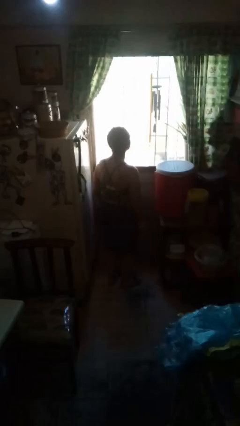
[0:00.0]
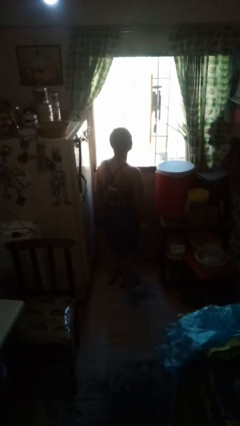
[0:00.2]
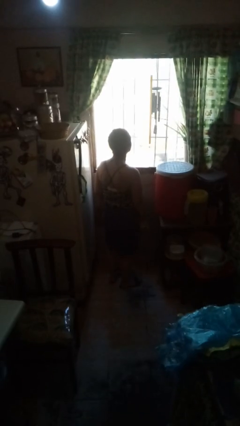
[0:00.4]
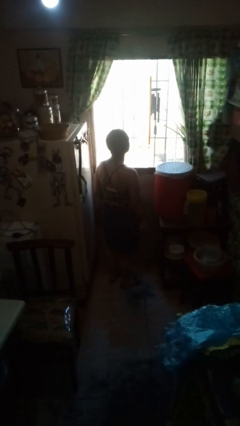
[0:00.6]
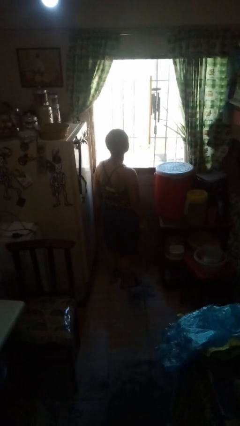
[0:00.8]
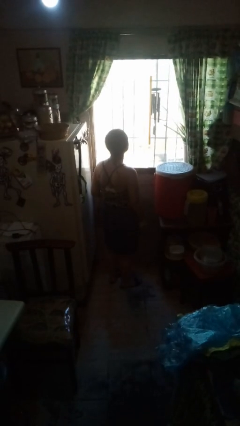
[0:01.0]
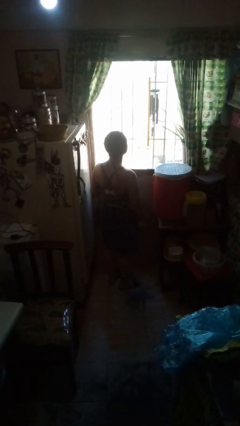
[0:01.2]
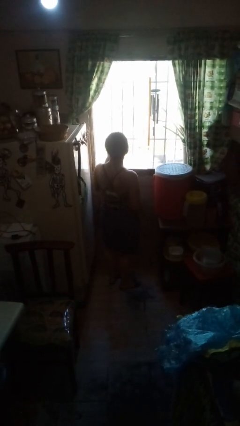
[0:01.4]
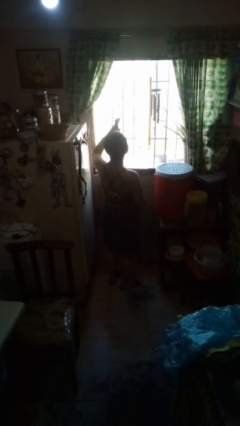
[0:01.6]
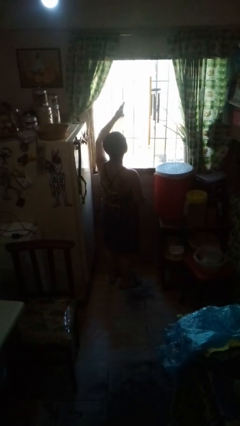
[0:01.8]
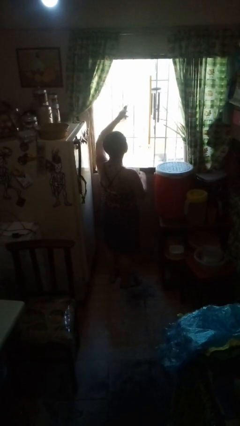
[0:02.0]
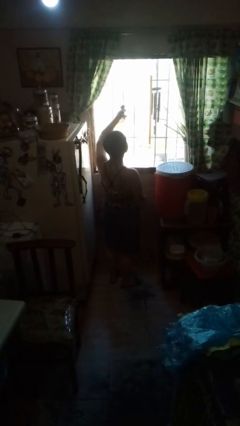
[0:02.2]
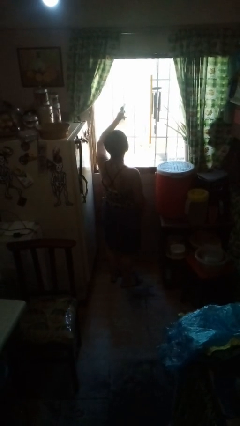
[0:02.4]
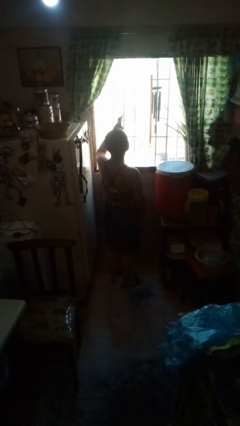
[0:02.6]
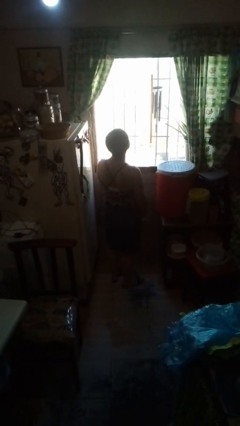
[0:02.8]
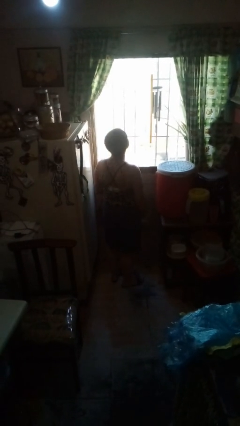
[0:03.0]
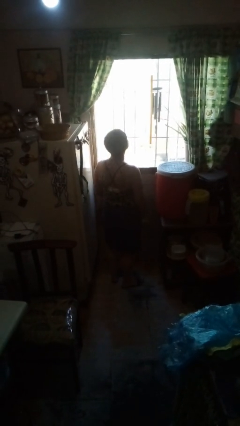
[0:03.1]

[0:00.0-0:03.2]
person sprays from bottle

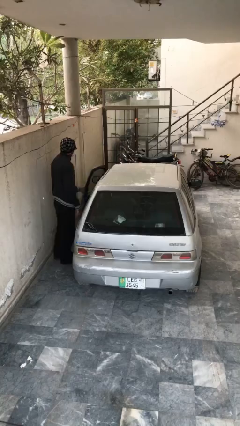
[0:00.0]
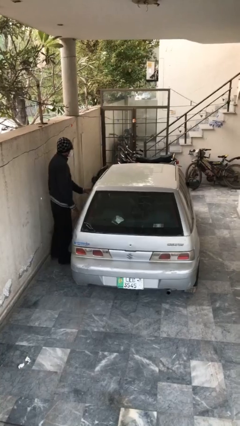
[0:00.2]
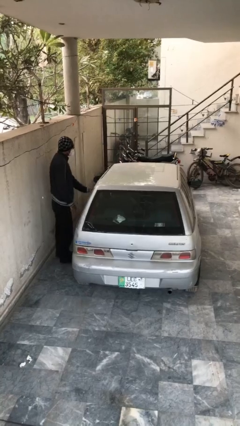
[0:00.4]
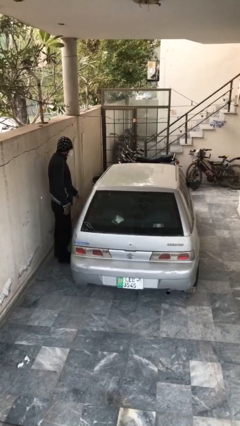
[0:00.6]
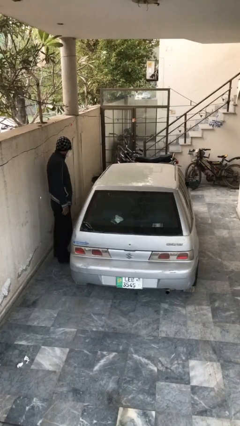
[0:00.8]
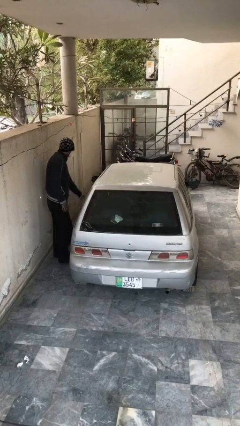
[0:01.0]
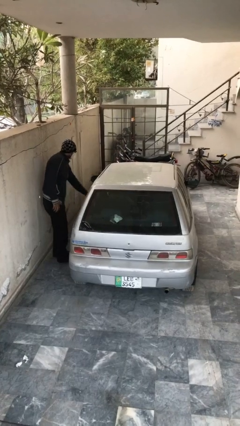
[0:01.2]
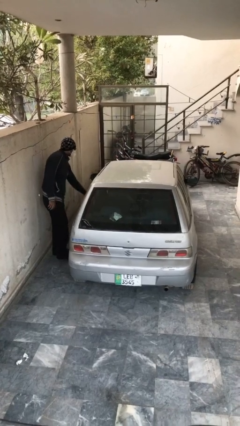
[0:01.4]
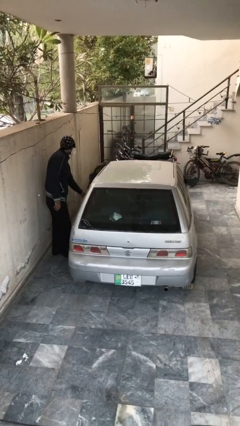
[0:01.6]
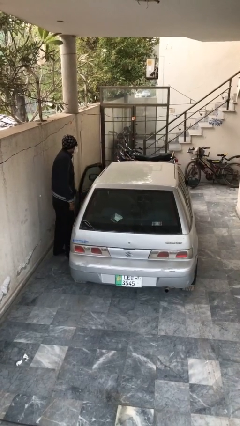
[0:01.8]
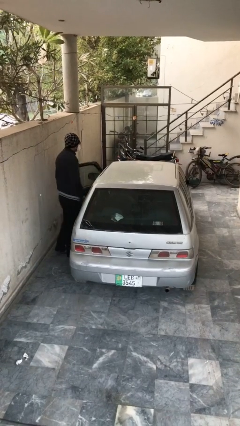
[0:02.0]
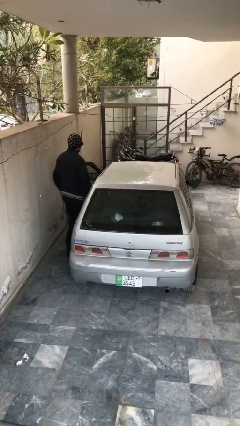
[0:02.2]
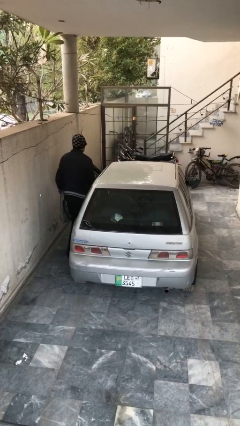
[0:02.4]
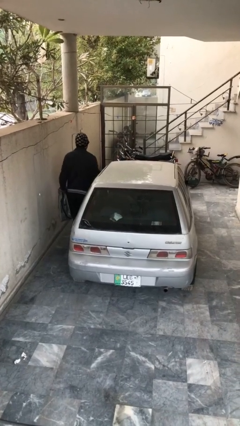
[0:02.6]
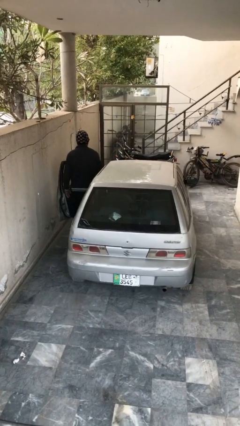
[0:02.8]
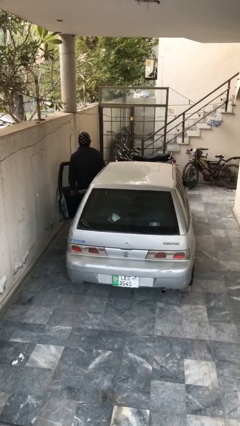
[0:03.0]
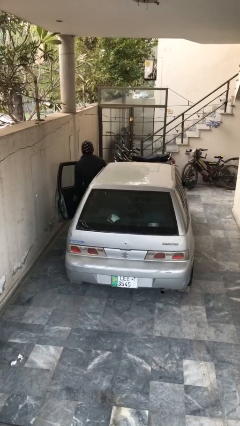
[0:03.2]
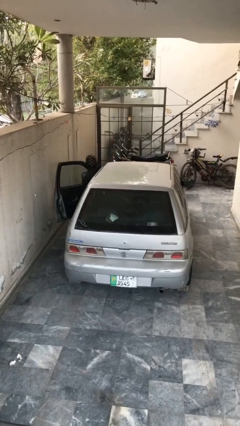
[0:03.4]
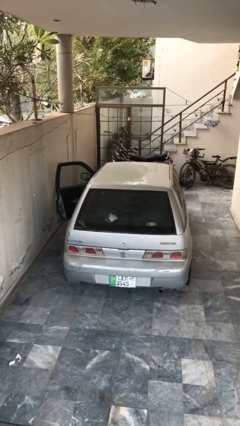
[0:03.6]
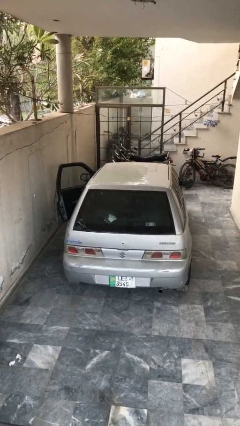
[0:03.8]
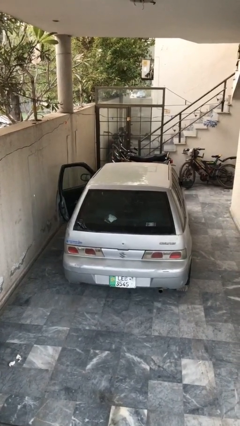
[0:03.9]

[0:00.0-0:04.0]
car picks up person

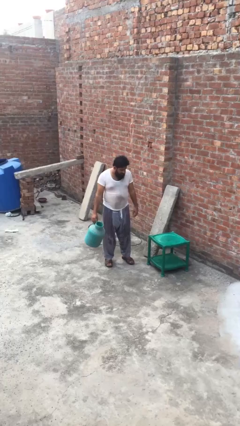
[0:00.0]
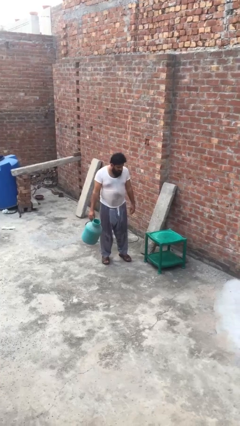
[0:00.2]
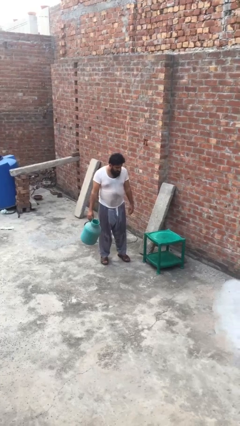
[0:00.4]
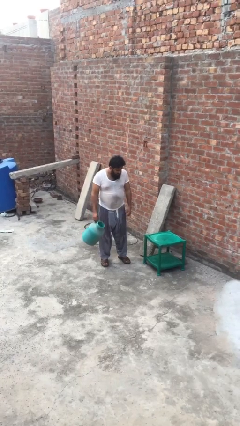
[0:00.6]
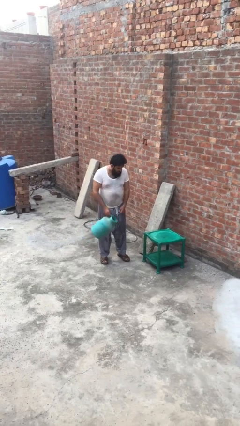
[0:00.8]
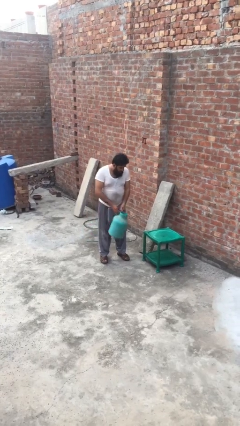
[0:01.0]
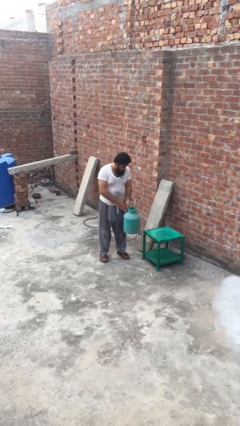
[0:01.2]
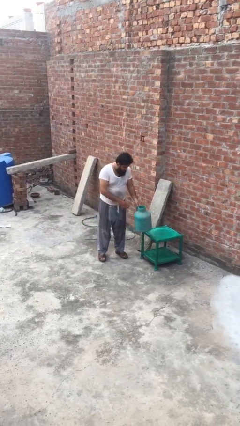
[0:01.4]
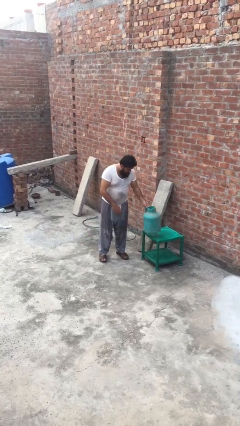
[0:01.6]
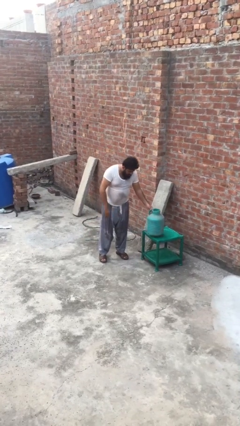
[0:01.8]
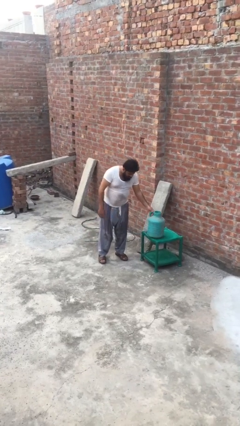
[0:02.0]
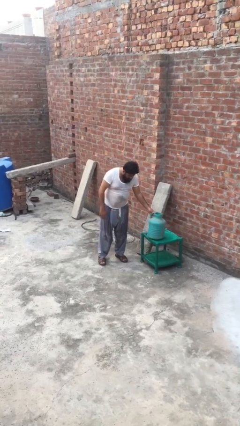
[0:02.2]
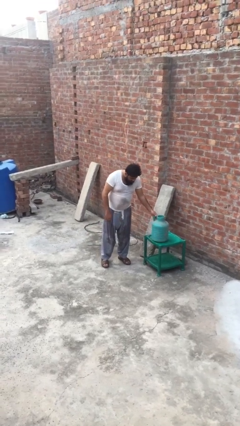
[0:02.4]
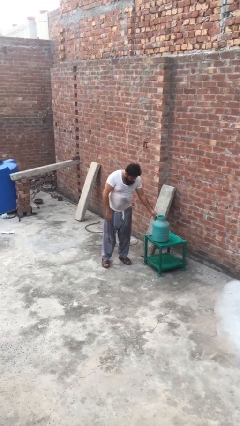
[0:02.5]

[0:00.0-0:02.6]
person puts down object on table

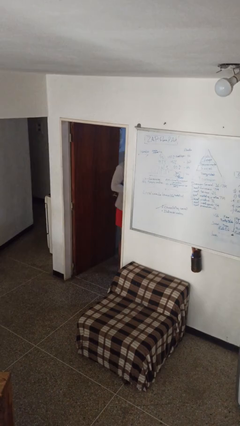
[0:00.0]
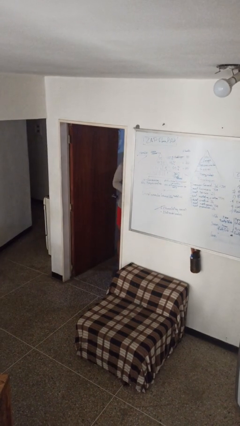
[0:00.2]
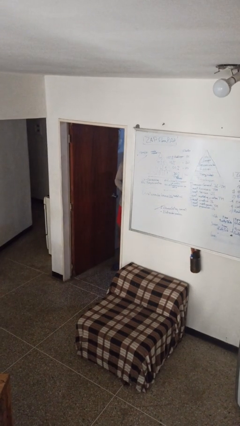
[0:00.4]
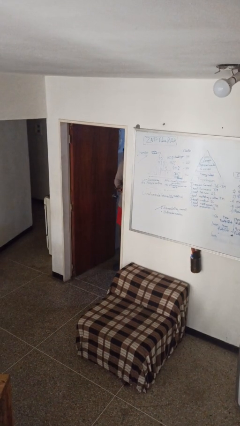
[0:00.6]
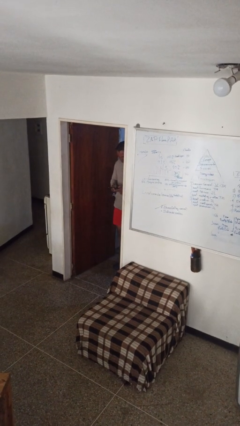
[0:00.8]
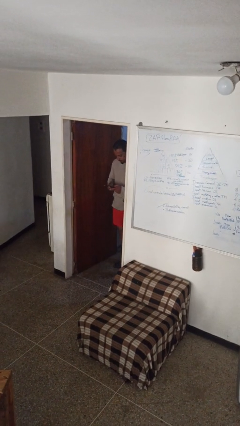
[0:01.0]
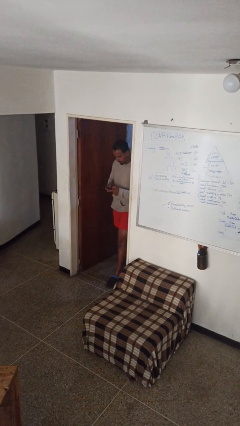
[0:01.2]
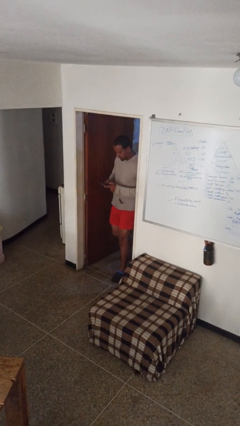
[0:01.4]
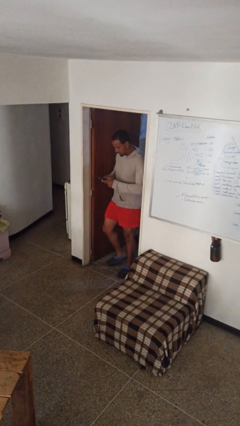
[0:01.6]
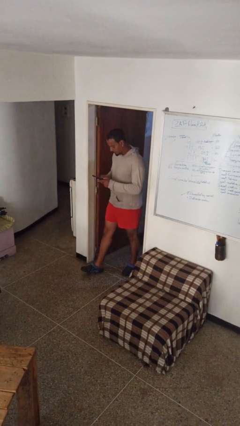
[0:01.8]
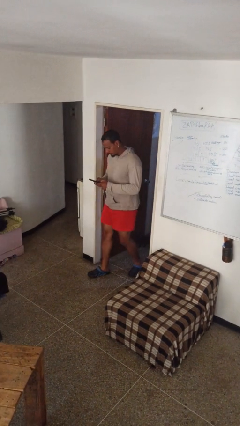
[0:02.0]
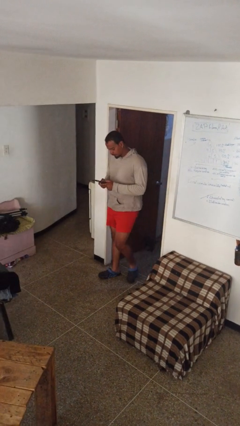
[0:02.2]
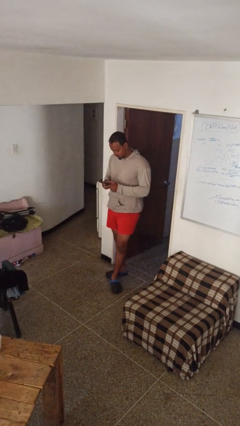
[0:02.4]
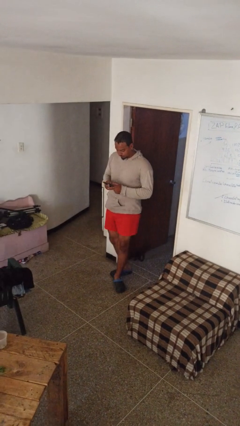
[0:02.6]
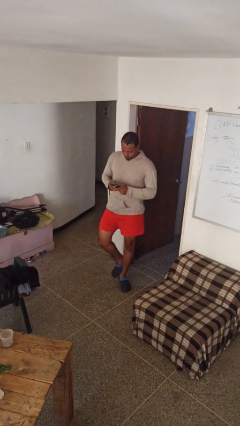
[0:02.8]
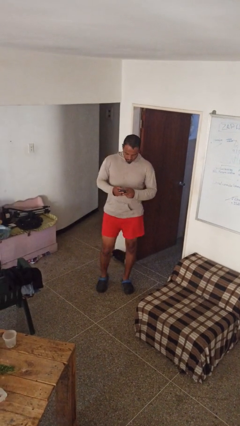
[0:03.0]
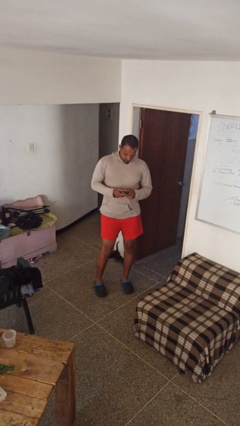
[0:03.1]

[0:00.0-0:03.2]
person enters scene through structure

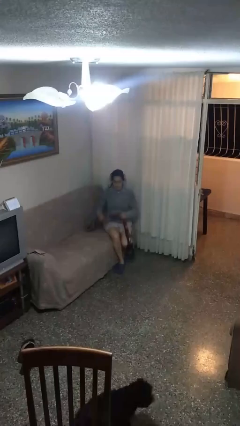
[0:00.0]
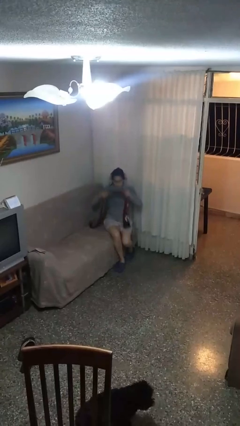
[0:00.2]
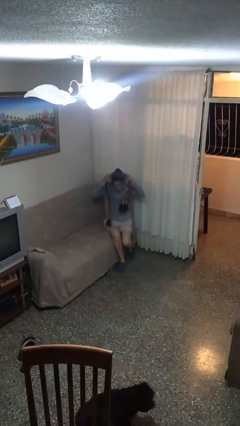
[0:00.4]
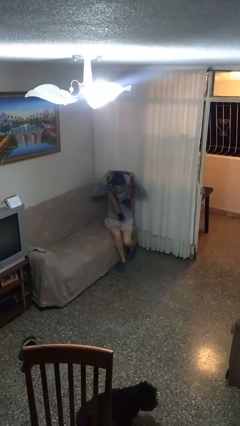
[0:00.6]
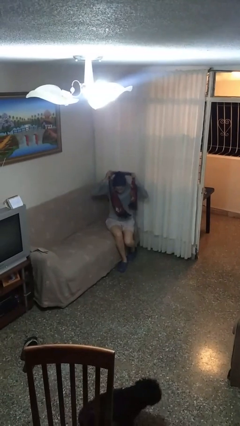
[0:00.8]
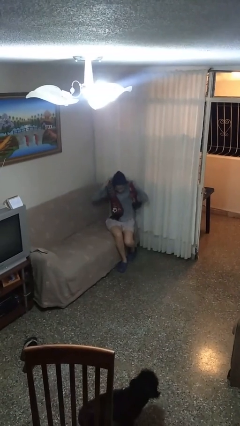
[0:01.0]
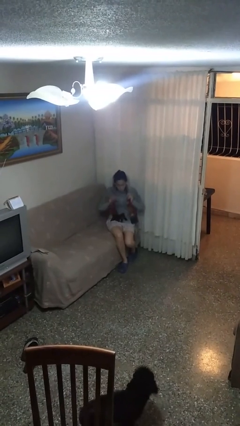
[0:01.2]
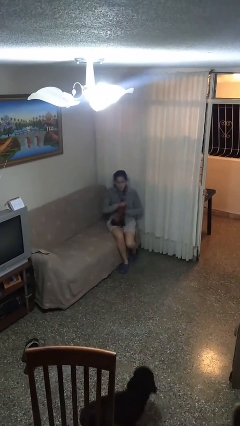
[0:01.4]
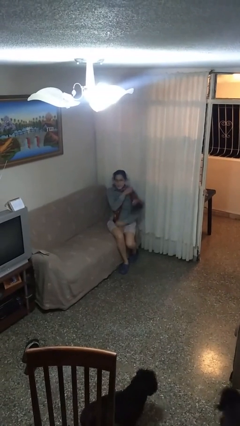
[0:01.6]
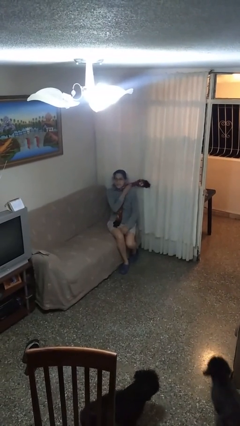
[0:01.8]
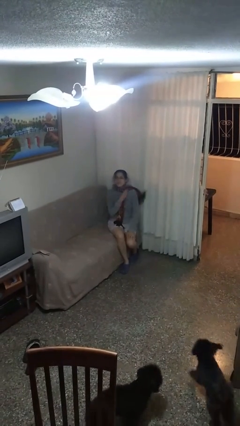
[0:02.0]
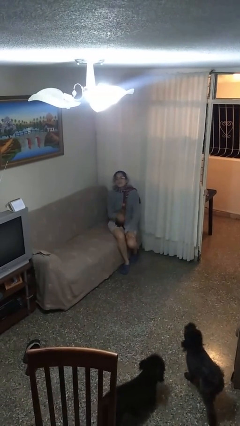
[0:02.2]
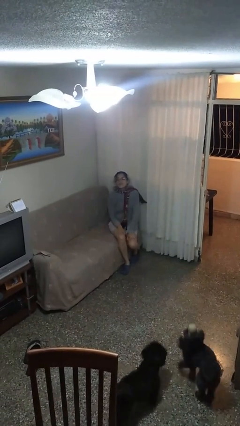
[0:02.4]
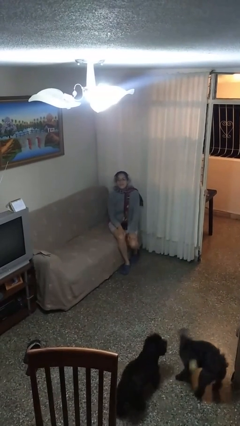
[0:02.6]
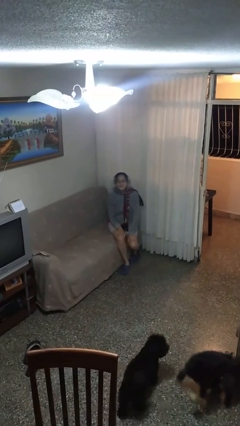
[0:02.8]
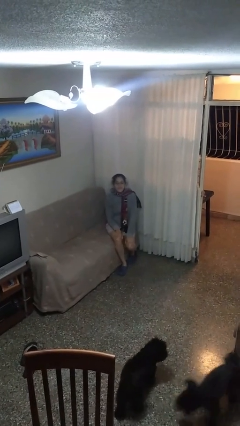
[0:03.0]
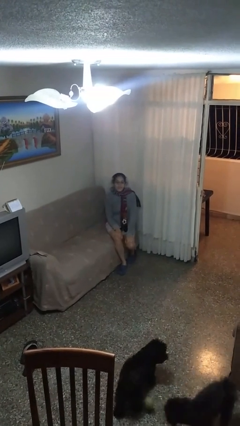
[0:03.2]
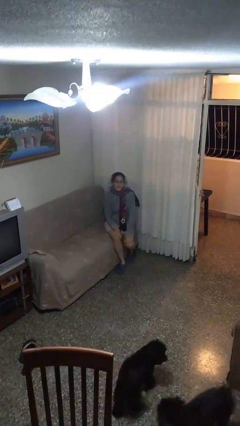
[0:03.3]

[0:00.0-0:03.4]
person puts on scarf

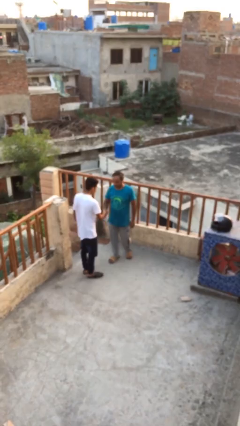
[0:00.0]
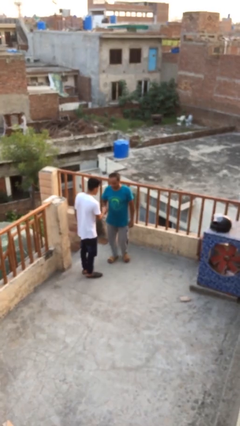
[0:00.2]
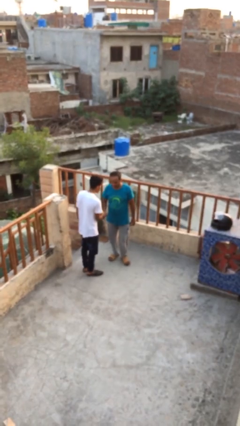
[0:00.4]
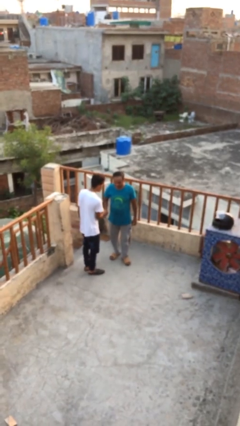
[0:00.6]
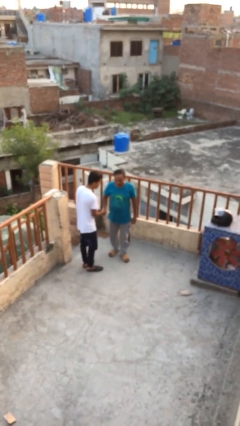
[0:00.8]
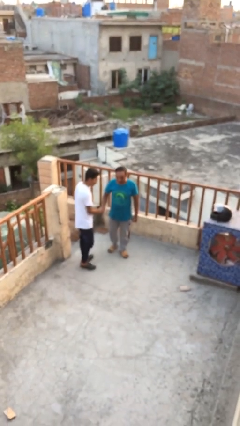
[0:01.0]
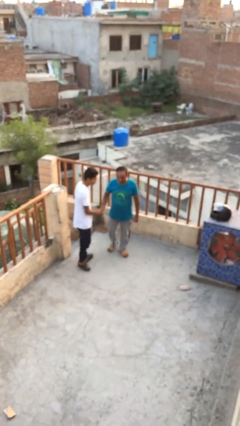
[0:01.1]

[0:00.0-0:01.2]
person shakes hand
